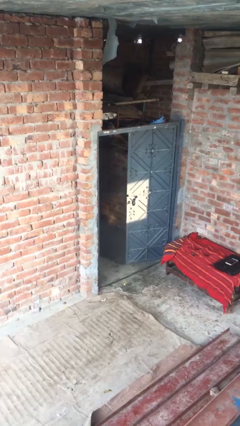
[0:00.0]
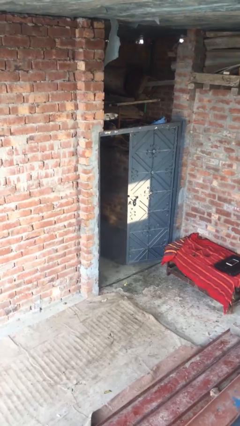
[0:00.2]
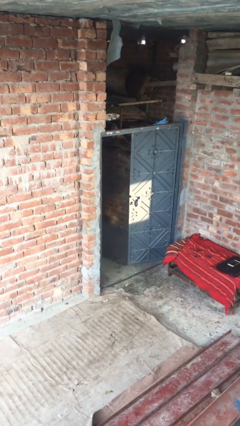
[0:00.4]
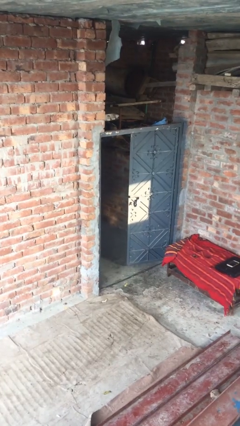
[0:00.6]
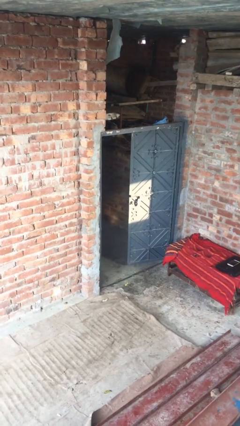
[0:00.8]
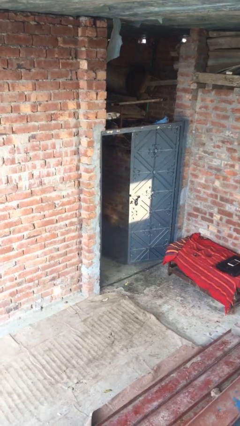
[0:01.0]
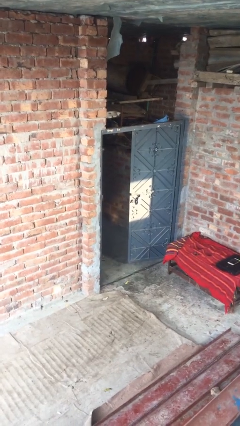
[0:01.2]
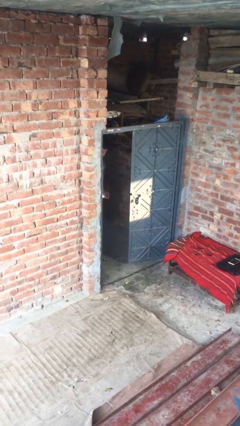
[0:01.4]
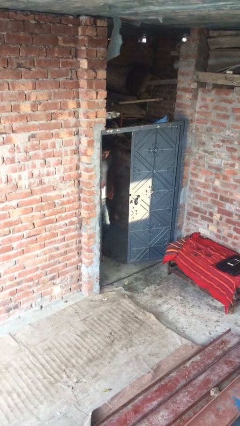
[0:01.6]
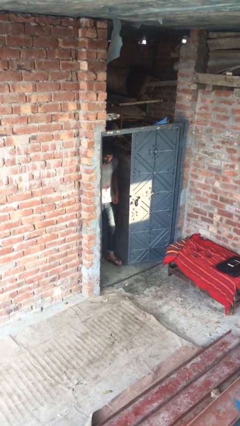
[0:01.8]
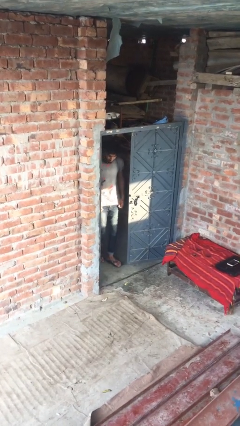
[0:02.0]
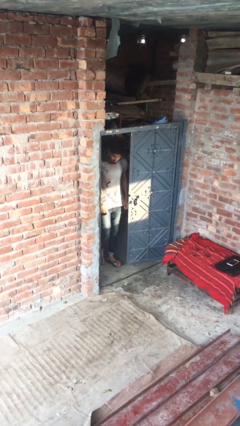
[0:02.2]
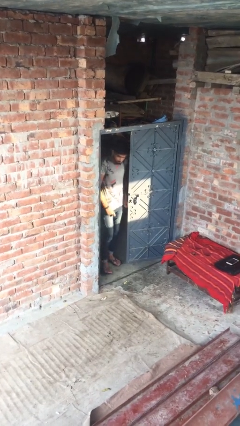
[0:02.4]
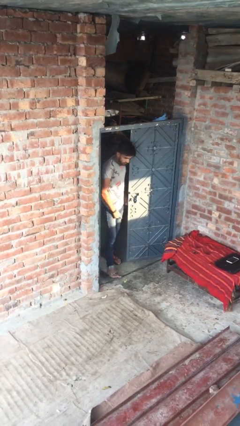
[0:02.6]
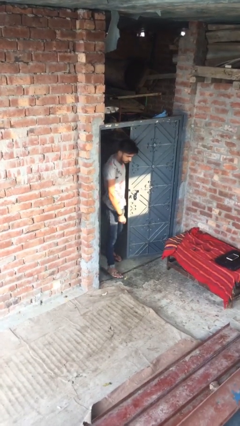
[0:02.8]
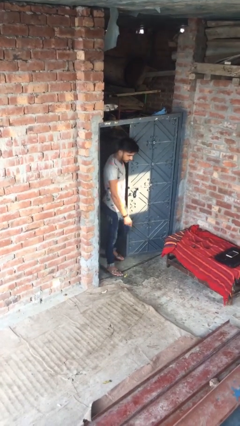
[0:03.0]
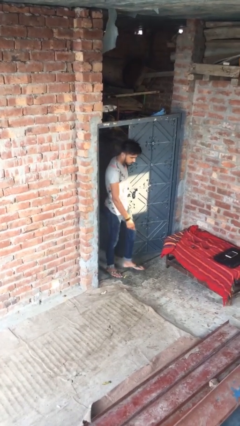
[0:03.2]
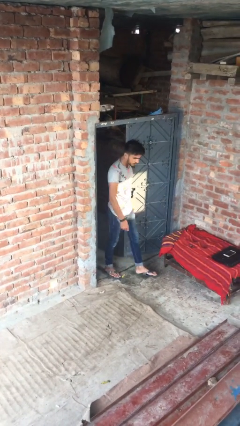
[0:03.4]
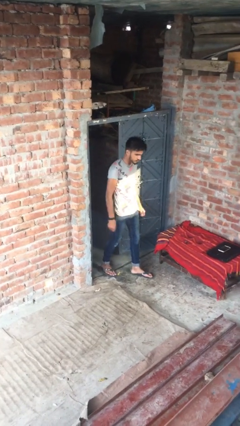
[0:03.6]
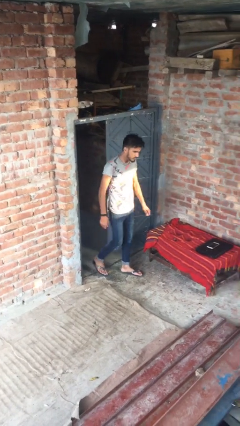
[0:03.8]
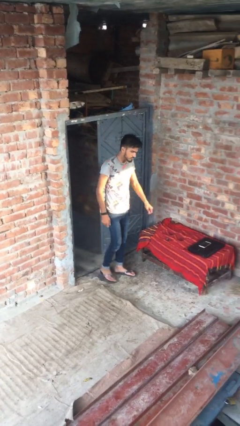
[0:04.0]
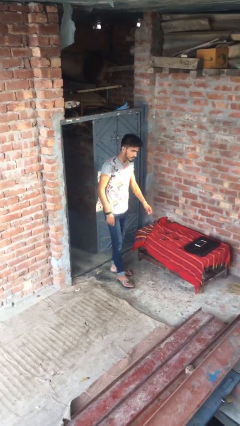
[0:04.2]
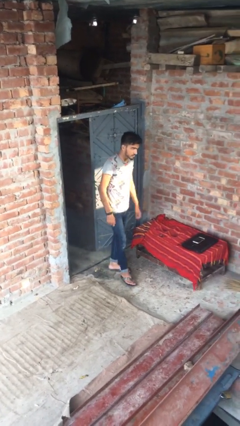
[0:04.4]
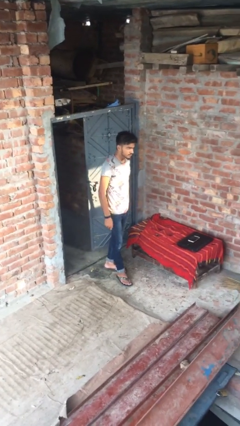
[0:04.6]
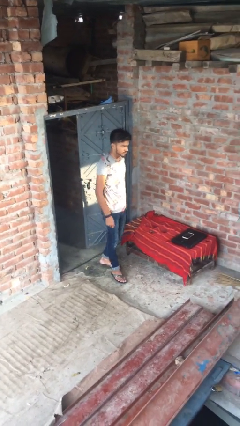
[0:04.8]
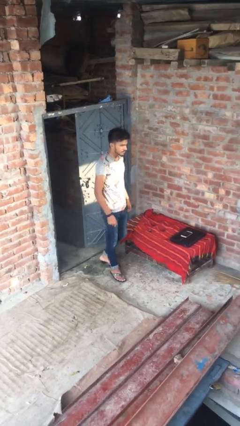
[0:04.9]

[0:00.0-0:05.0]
person enters scene through structure

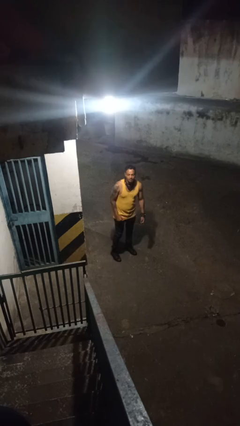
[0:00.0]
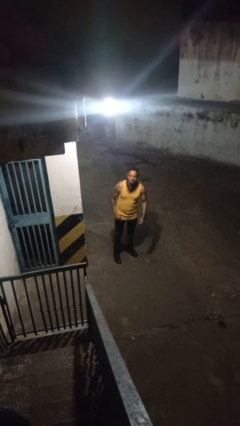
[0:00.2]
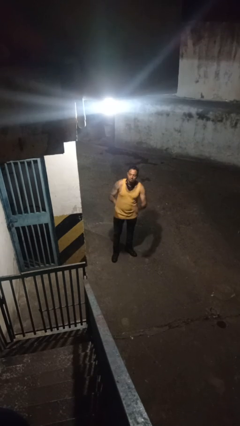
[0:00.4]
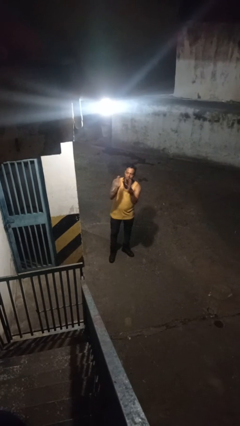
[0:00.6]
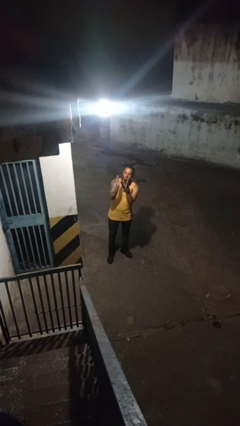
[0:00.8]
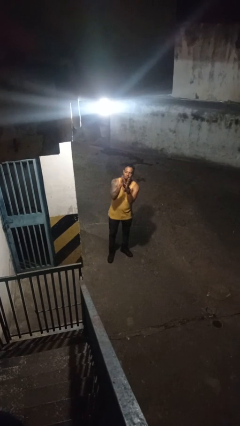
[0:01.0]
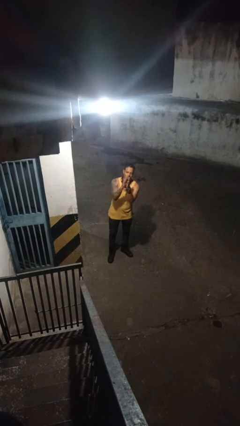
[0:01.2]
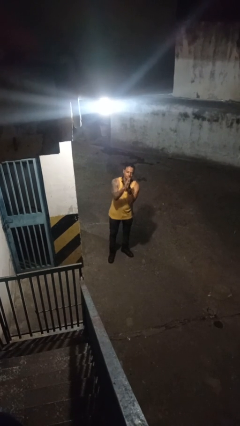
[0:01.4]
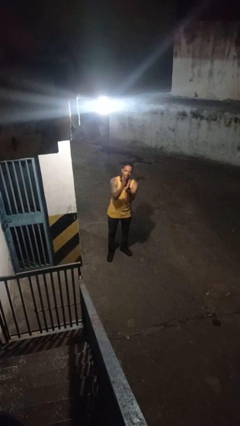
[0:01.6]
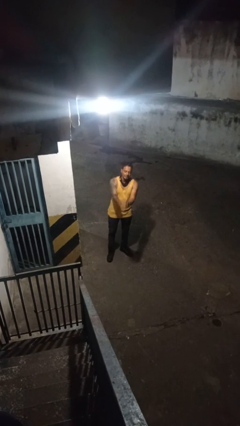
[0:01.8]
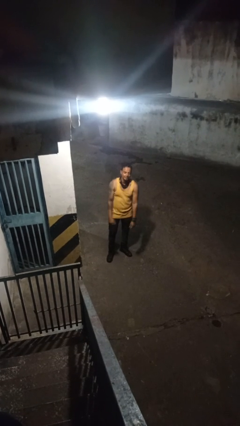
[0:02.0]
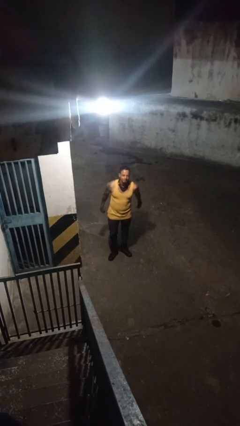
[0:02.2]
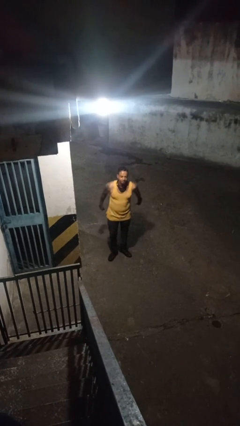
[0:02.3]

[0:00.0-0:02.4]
person claps hands

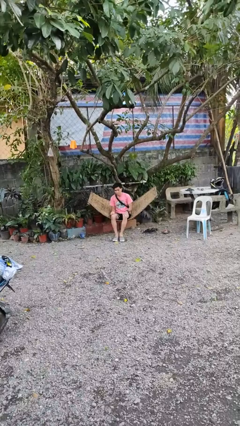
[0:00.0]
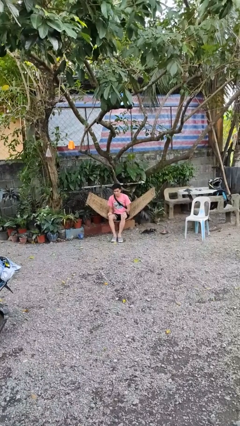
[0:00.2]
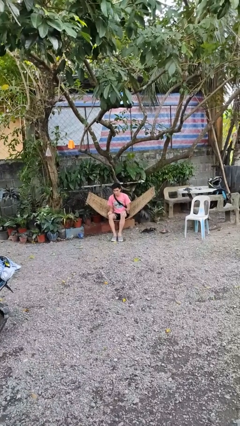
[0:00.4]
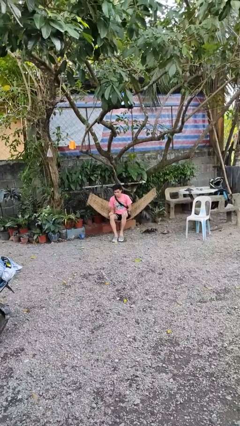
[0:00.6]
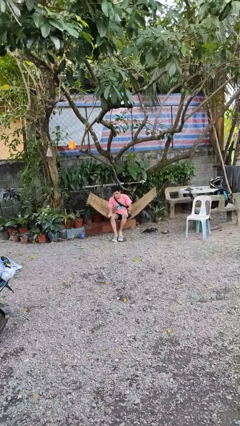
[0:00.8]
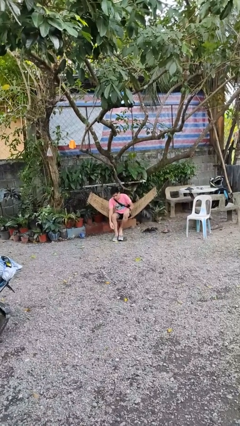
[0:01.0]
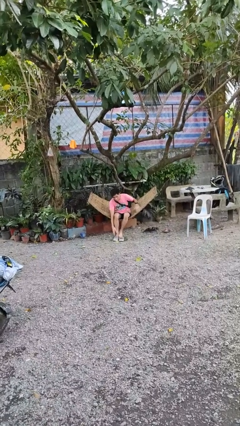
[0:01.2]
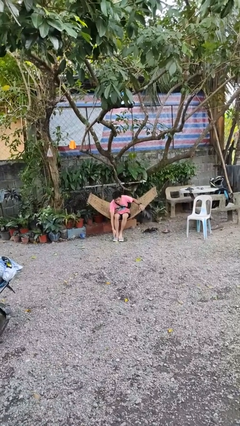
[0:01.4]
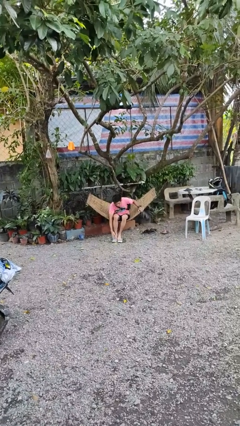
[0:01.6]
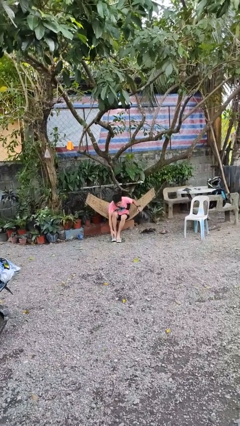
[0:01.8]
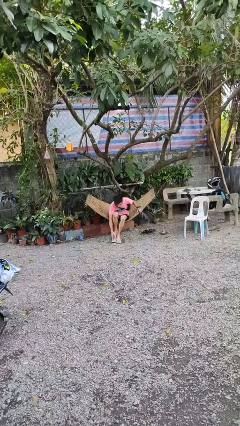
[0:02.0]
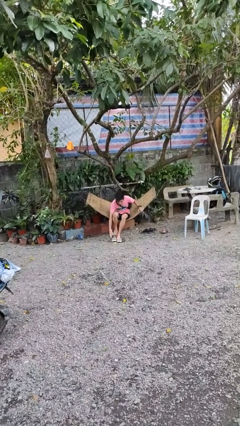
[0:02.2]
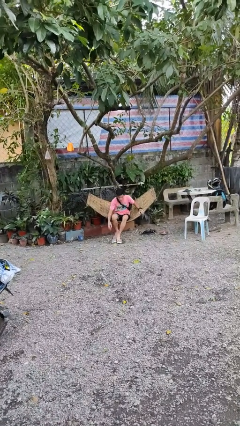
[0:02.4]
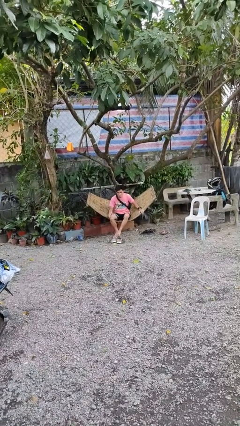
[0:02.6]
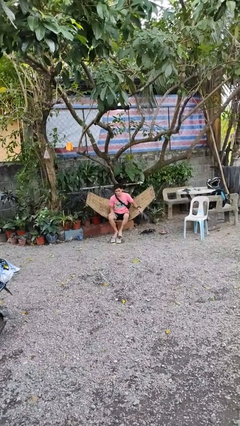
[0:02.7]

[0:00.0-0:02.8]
person takes off shoes

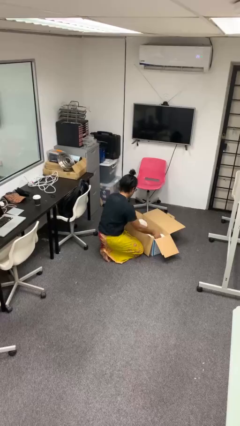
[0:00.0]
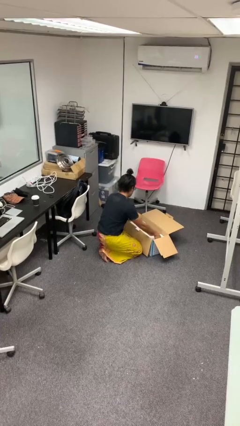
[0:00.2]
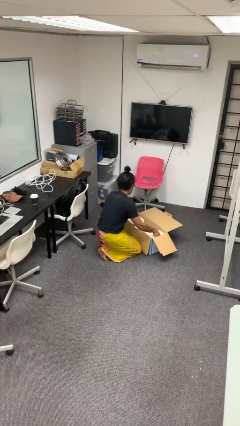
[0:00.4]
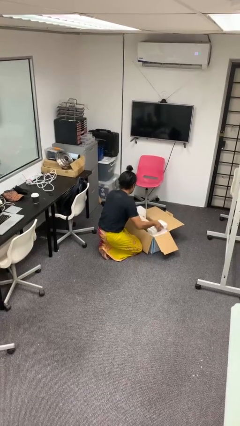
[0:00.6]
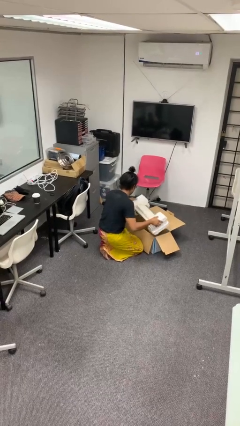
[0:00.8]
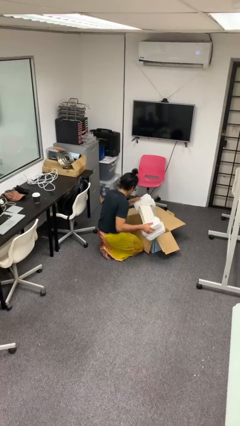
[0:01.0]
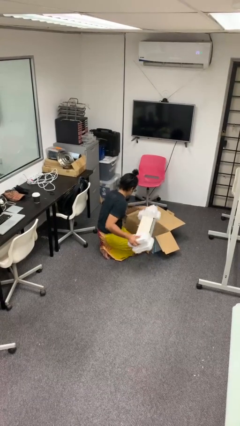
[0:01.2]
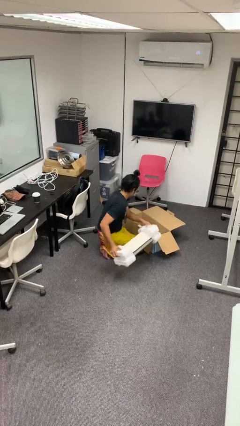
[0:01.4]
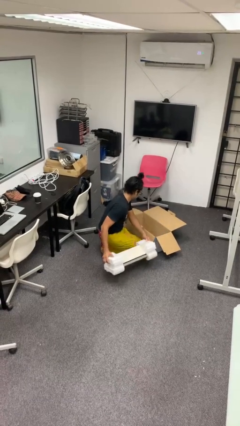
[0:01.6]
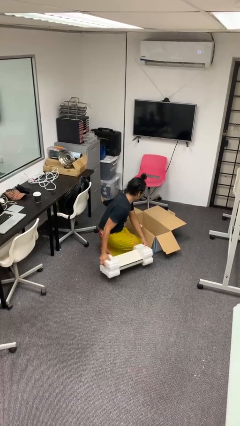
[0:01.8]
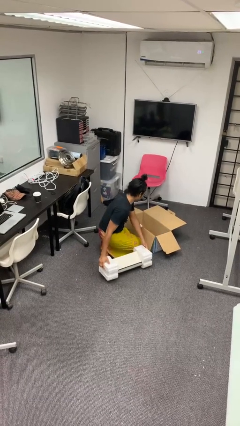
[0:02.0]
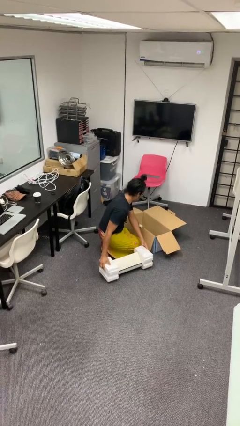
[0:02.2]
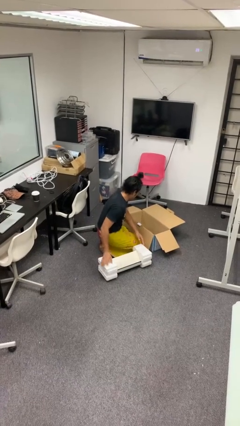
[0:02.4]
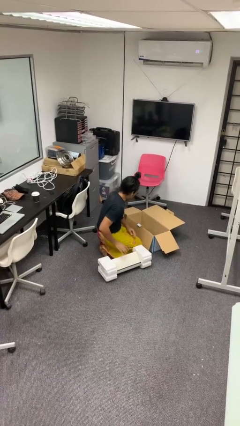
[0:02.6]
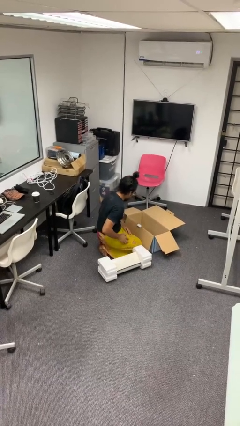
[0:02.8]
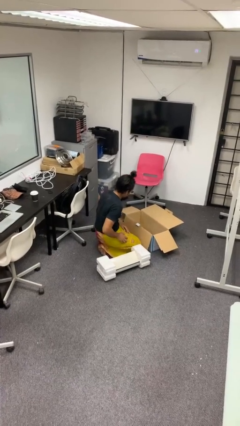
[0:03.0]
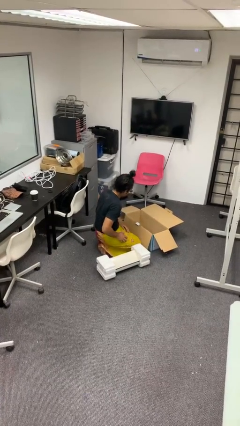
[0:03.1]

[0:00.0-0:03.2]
person takes object from box

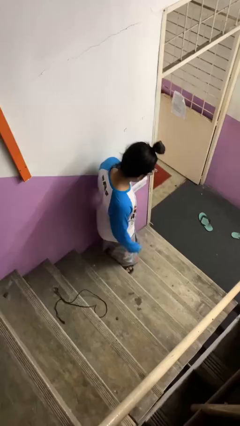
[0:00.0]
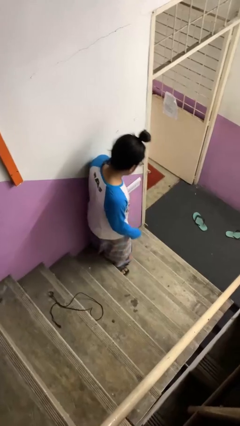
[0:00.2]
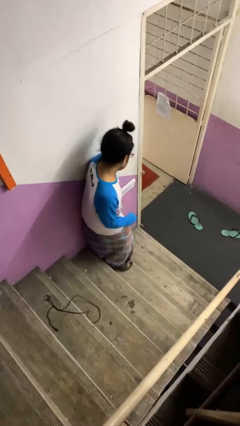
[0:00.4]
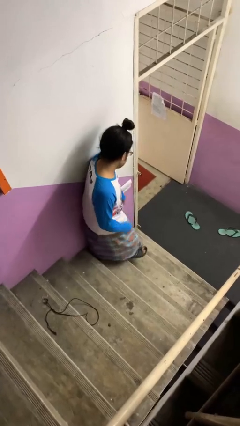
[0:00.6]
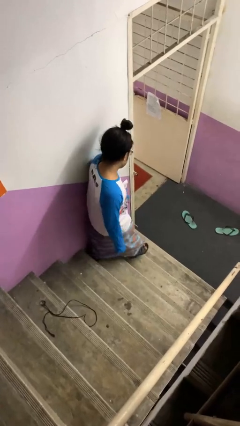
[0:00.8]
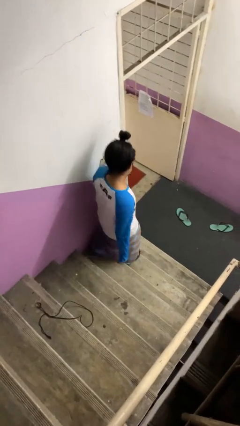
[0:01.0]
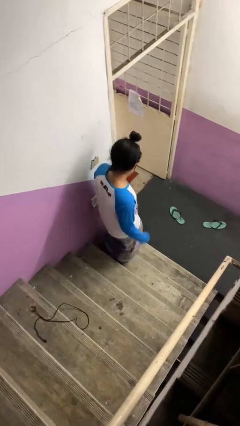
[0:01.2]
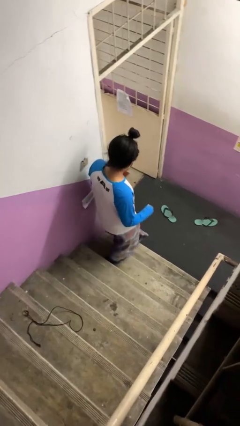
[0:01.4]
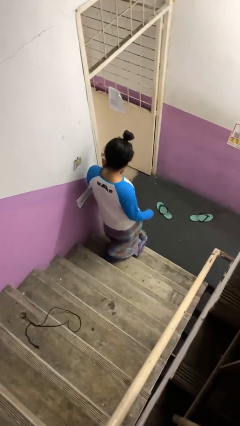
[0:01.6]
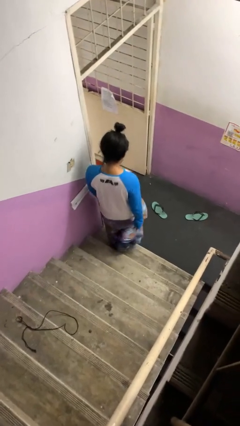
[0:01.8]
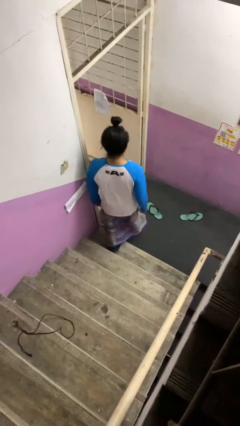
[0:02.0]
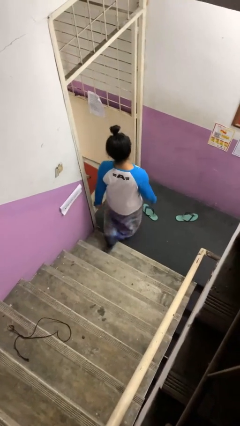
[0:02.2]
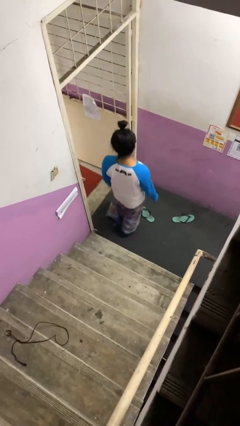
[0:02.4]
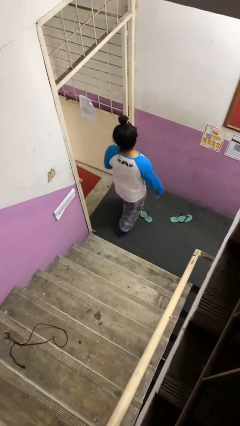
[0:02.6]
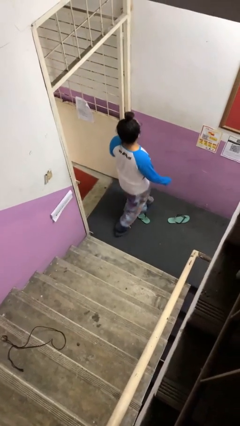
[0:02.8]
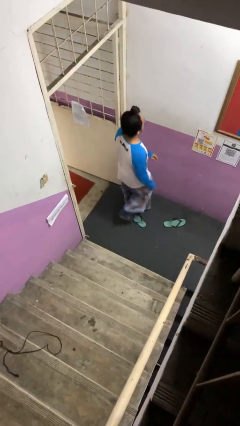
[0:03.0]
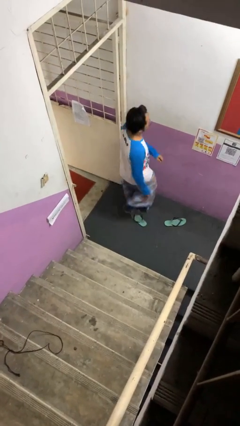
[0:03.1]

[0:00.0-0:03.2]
person climbs down stairs

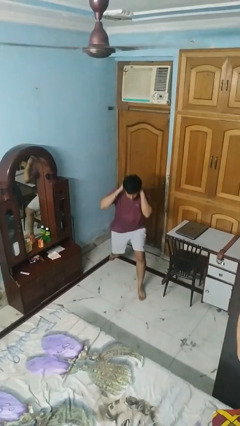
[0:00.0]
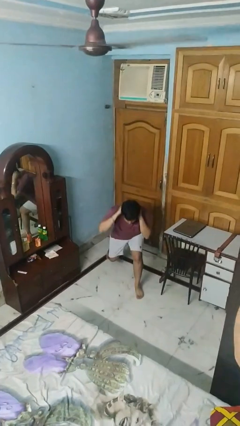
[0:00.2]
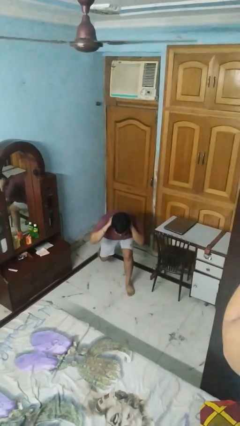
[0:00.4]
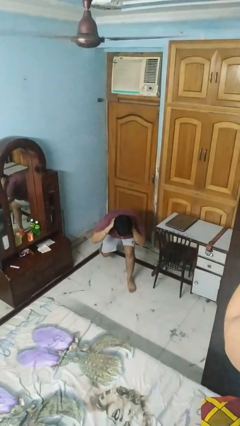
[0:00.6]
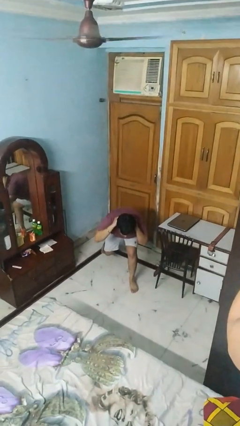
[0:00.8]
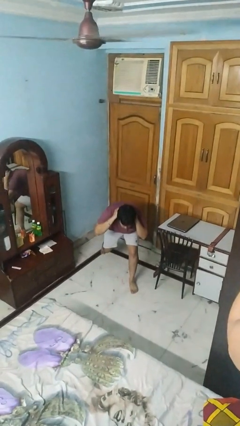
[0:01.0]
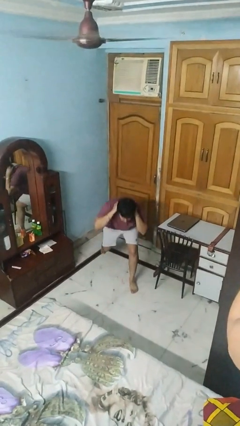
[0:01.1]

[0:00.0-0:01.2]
person exercises with lunges
